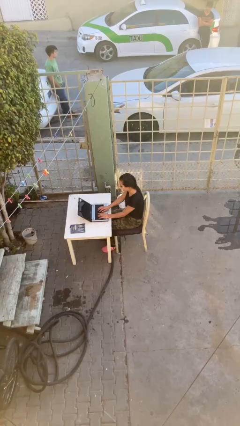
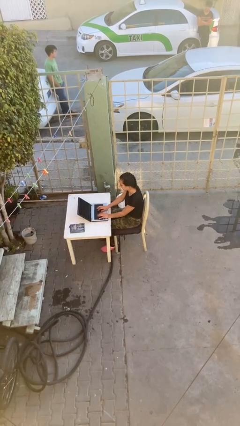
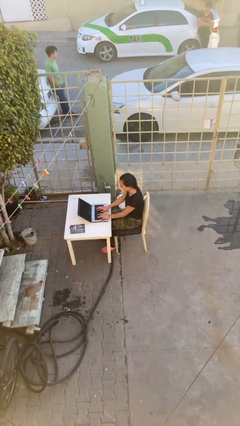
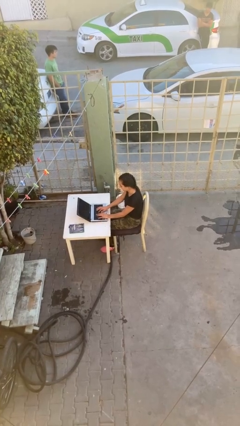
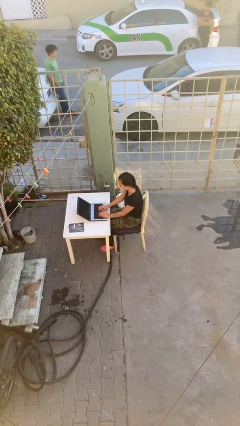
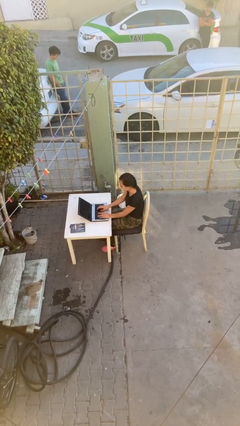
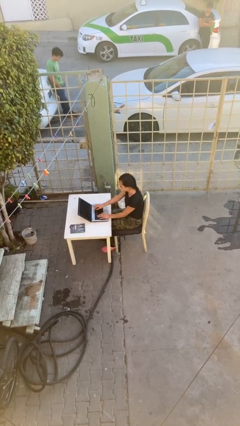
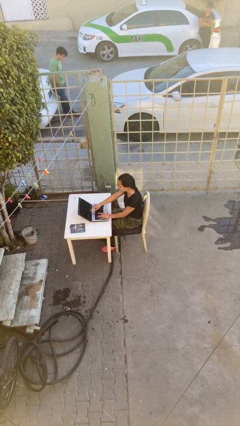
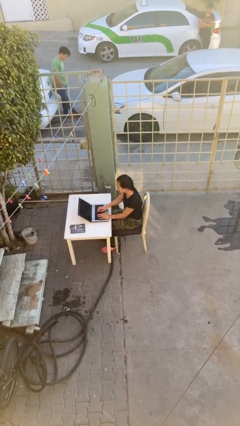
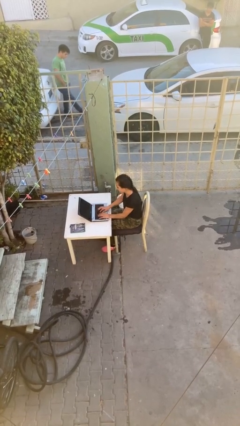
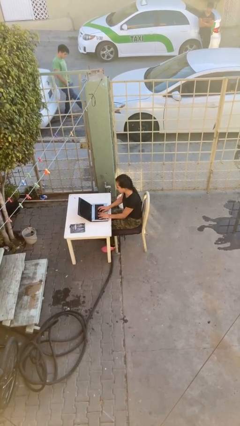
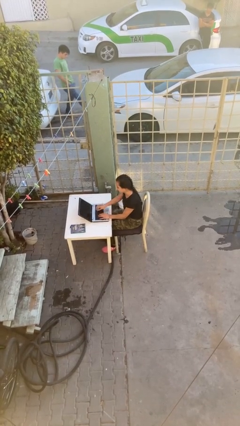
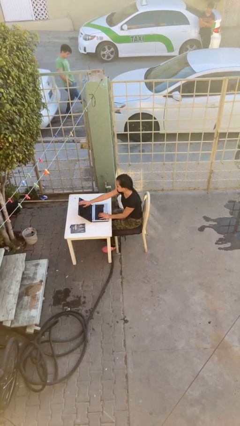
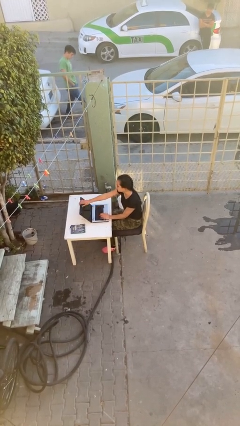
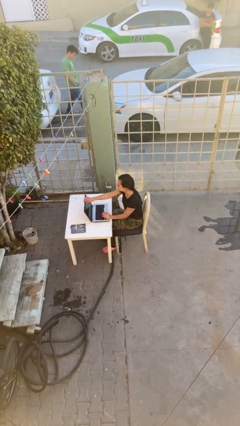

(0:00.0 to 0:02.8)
person interacts with laptop

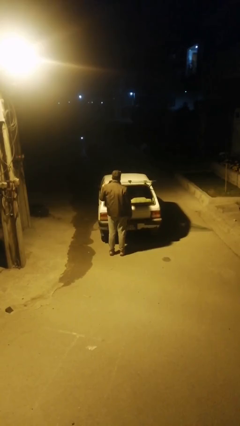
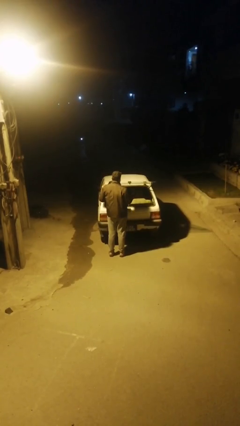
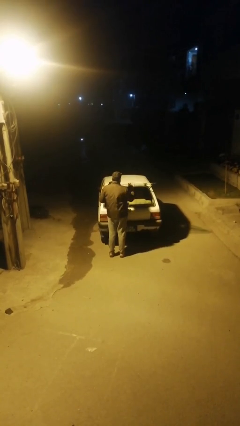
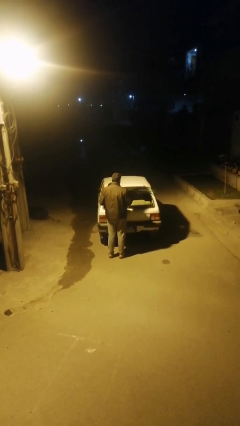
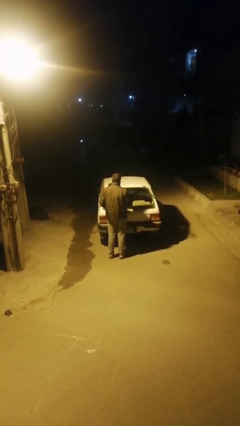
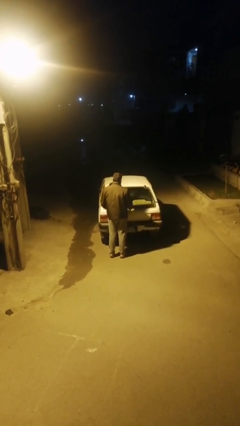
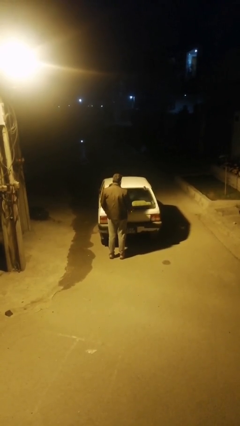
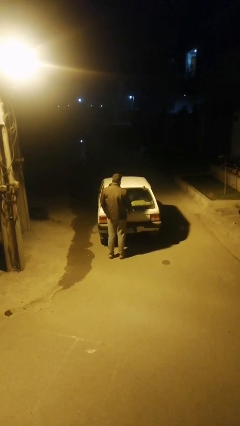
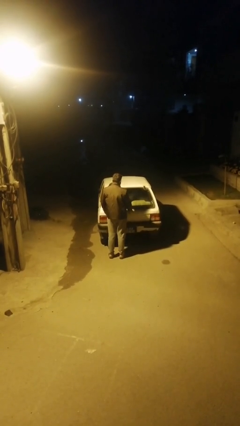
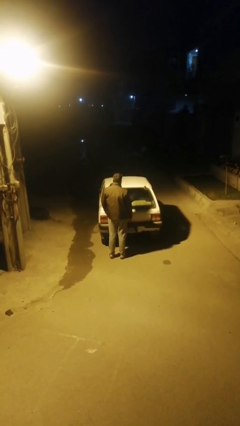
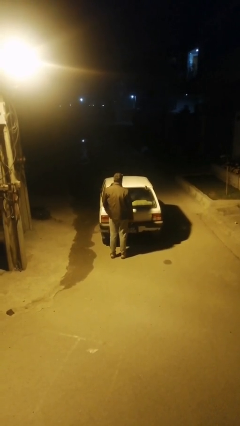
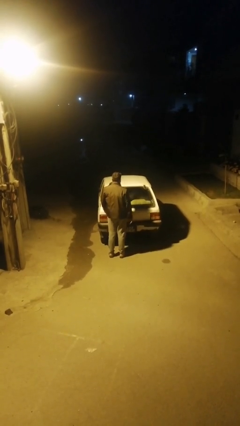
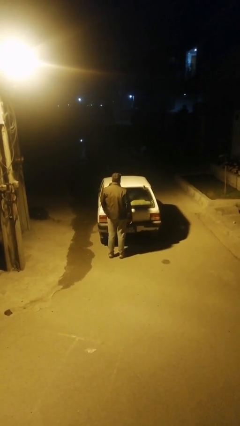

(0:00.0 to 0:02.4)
person closes car trunk

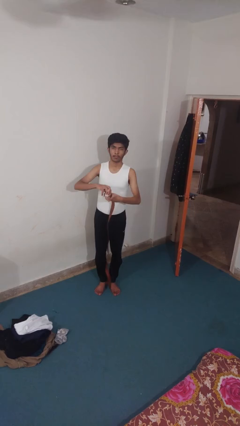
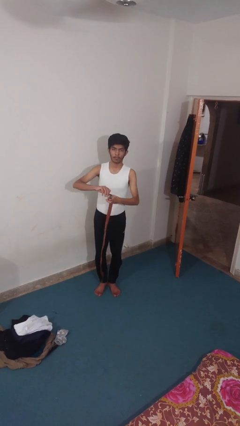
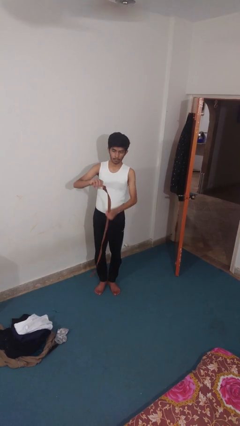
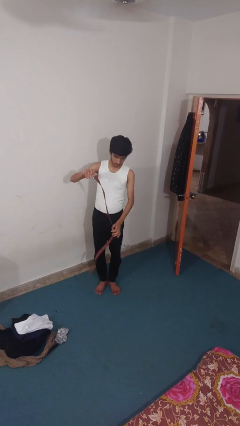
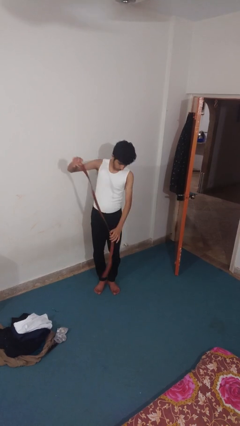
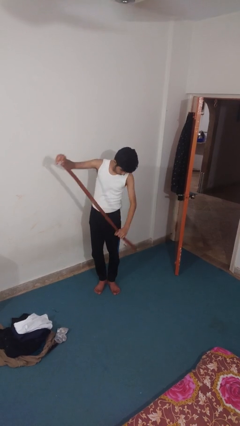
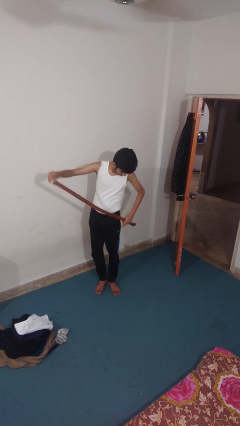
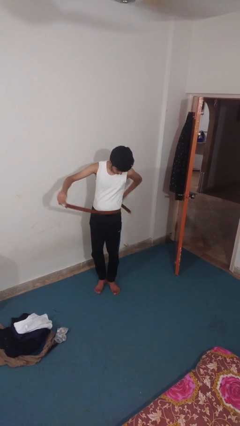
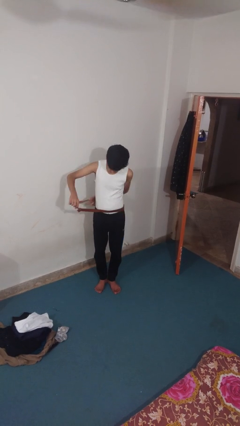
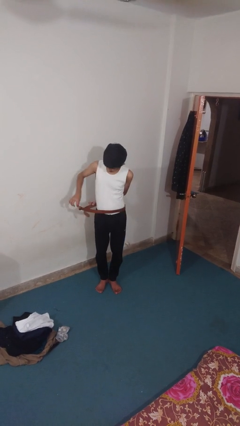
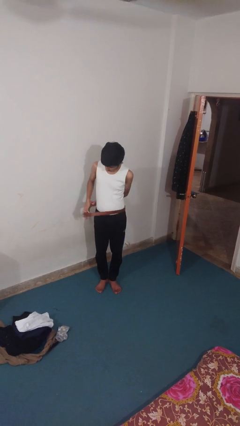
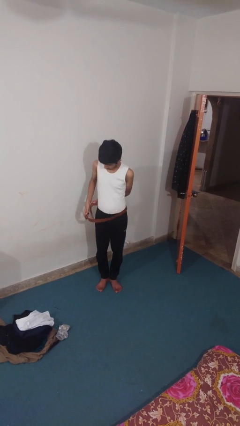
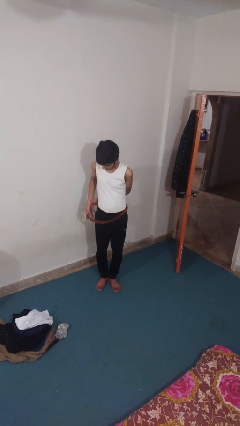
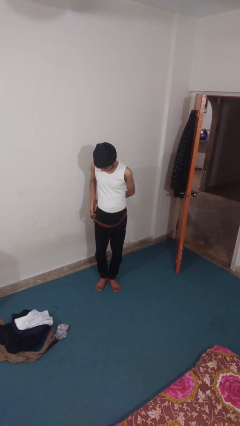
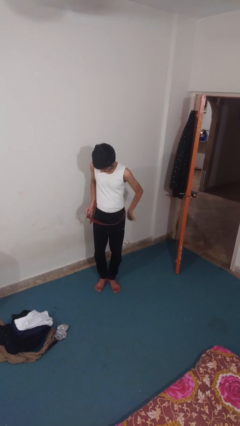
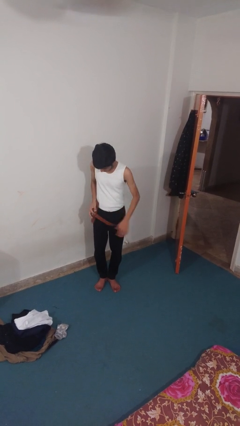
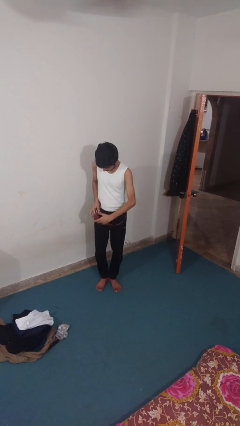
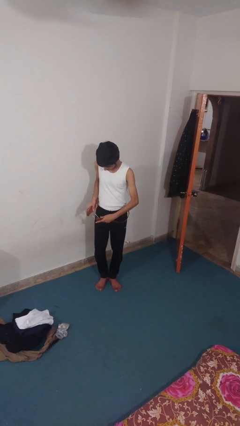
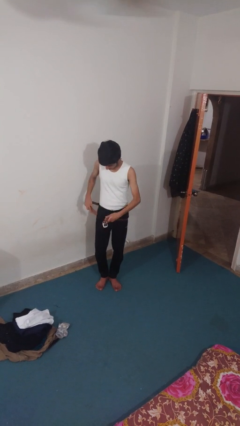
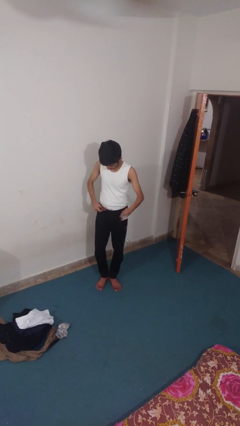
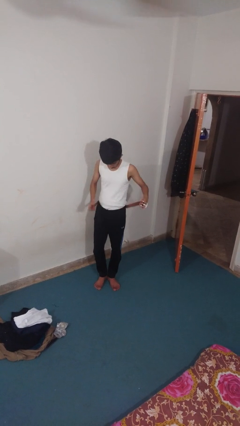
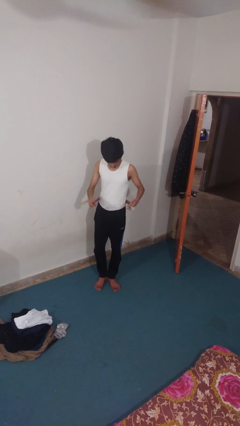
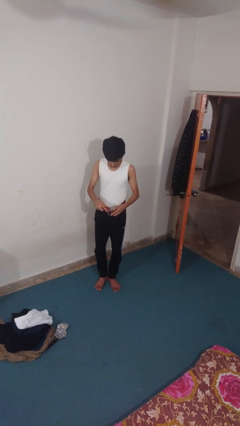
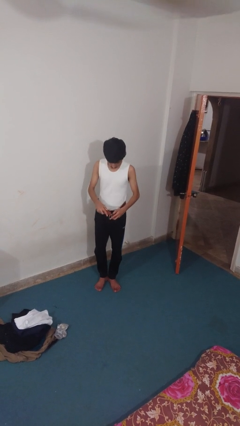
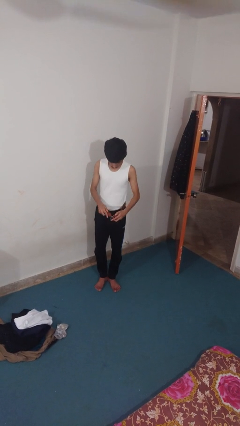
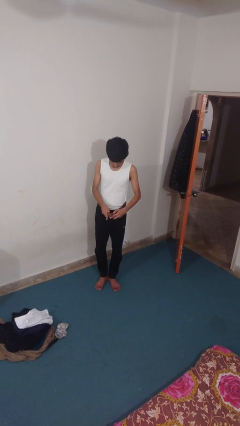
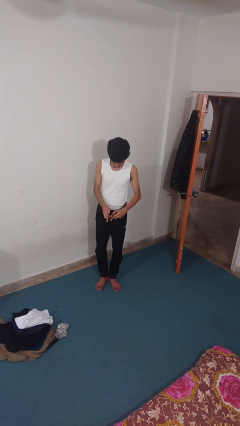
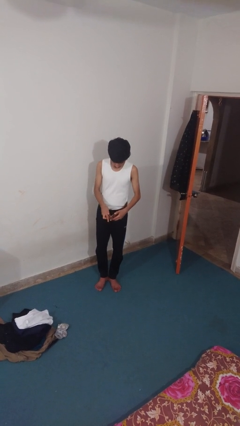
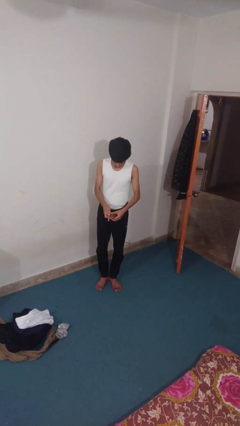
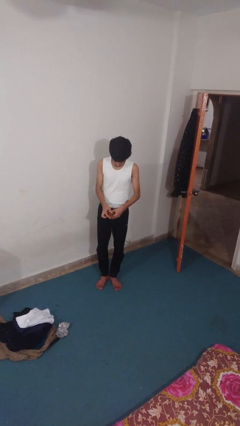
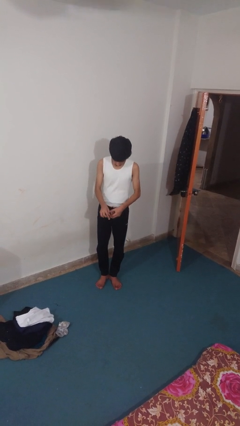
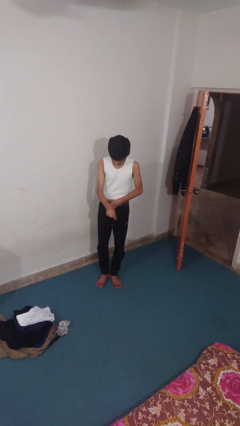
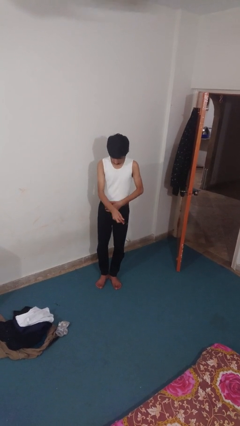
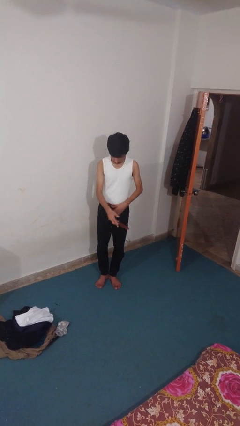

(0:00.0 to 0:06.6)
person puts on belt

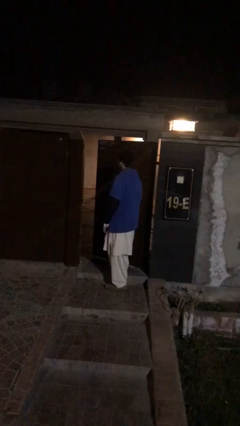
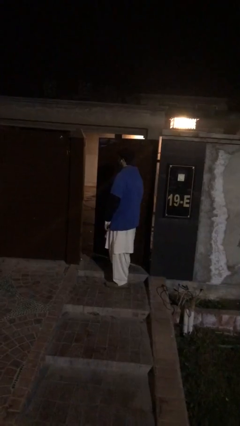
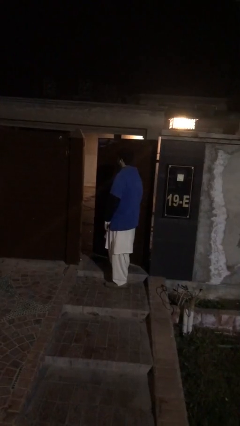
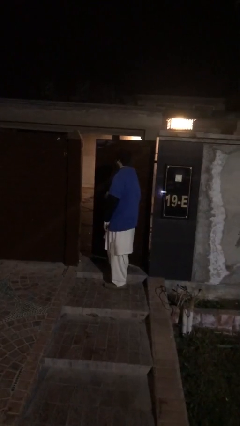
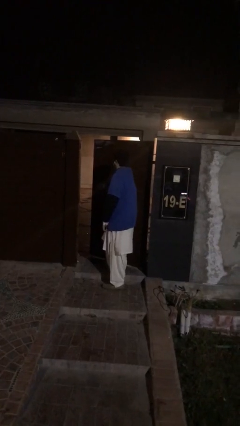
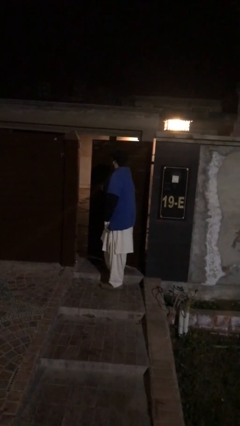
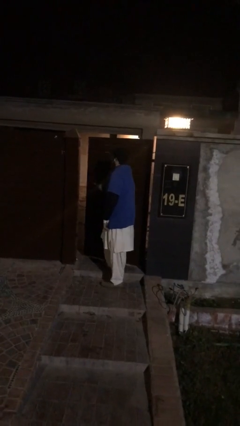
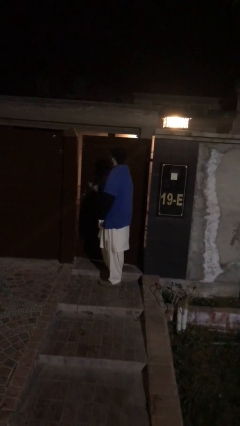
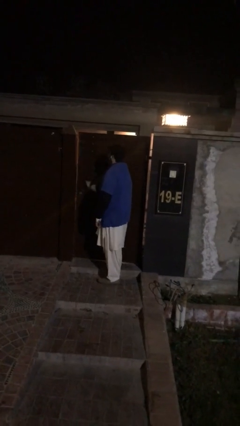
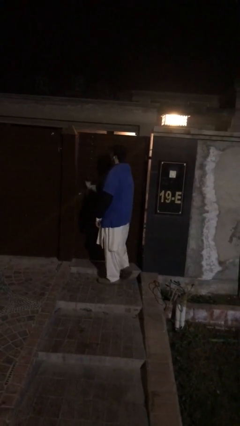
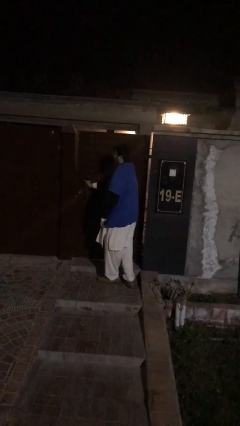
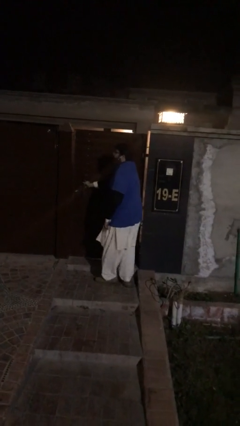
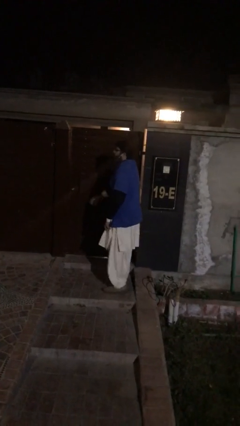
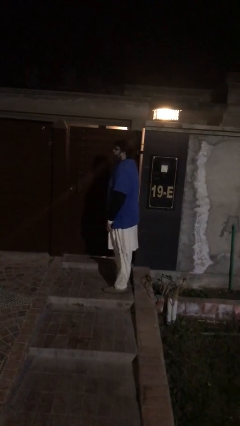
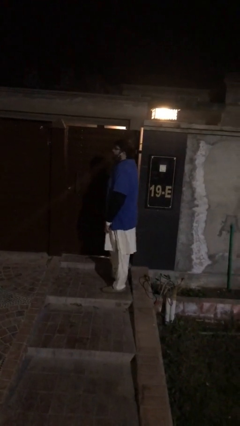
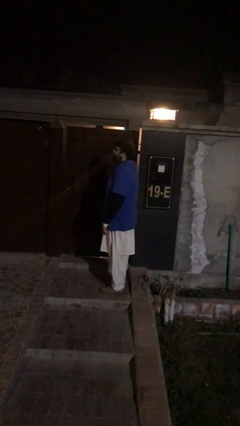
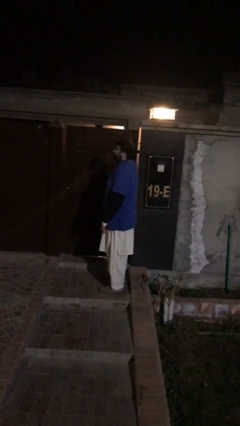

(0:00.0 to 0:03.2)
person closes facility door

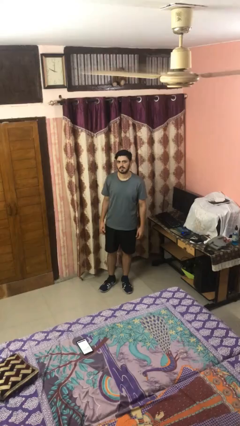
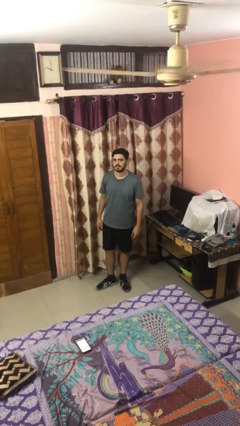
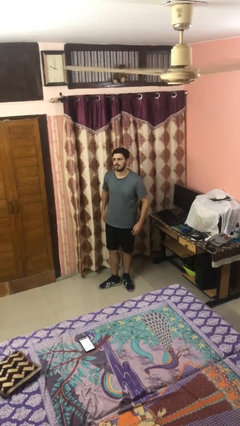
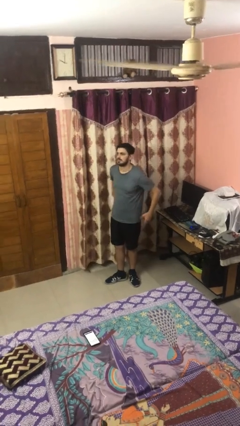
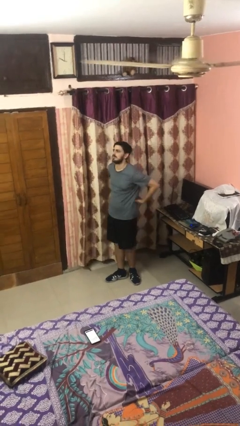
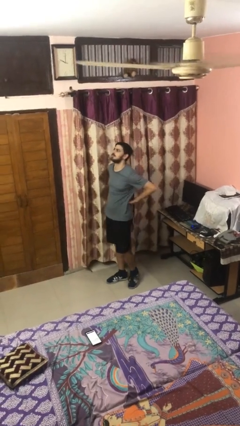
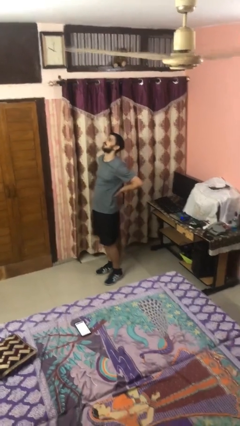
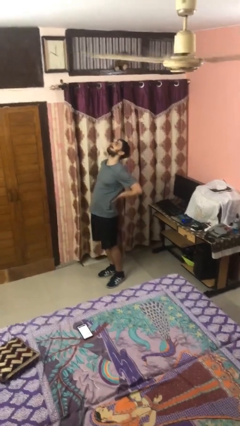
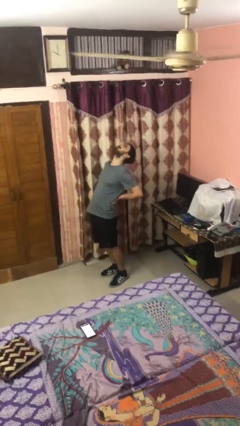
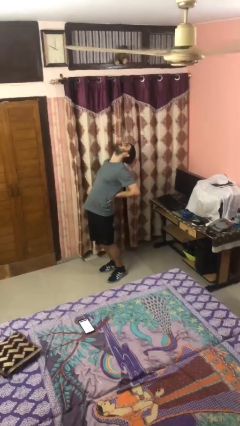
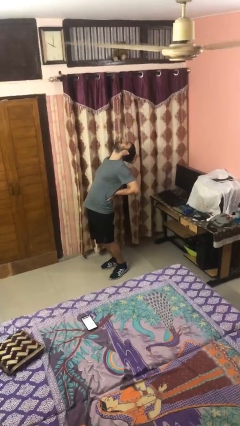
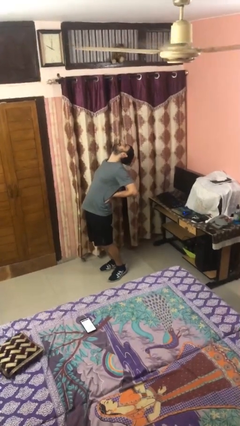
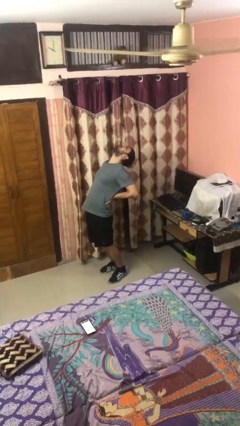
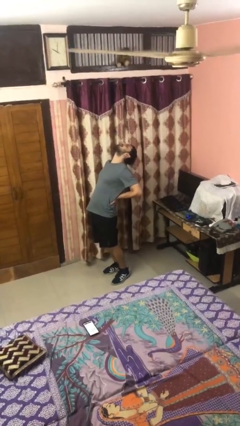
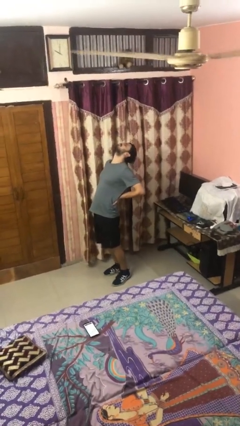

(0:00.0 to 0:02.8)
person stretches back
